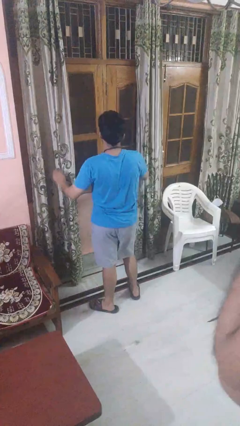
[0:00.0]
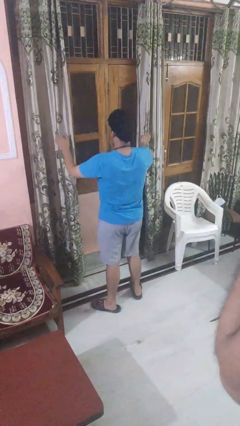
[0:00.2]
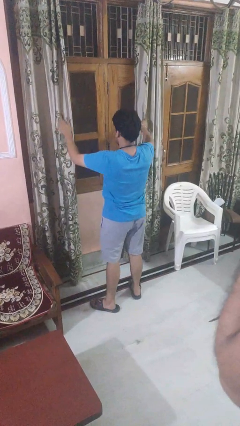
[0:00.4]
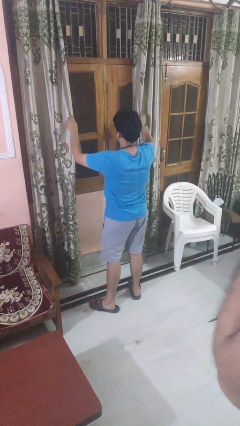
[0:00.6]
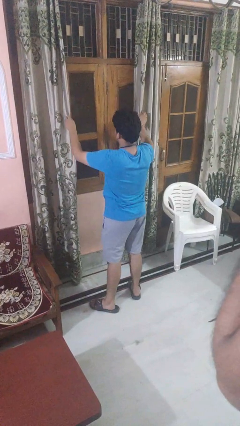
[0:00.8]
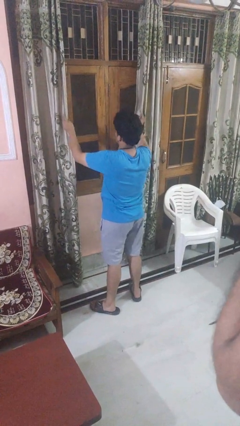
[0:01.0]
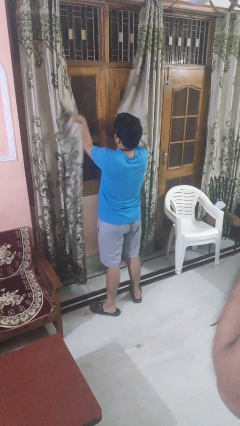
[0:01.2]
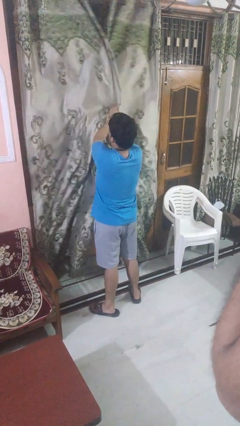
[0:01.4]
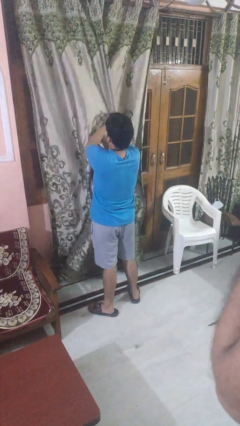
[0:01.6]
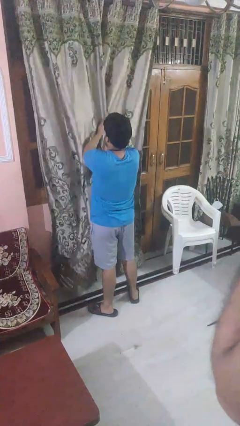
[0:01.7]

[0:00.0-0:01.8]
person closes curtains

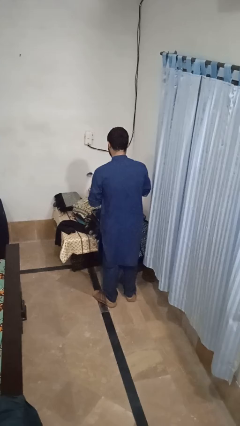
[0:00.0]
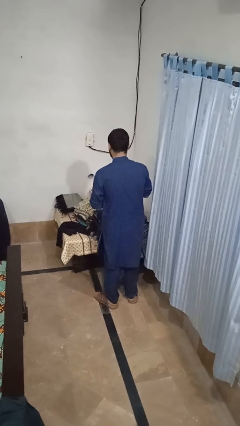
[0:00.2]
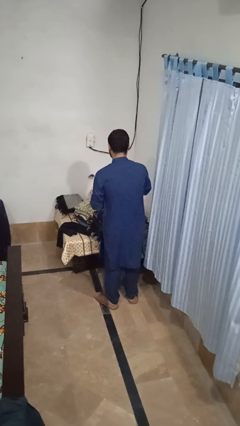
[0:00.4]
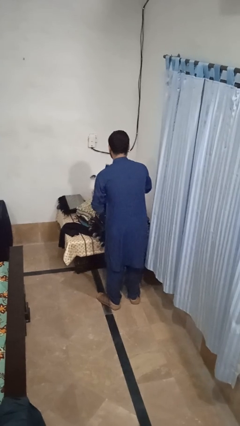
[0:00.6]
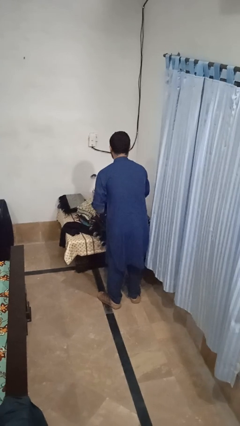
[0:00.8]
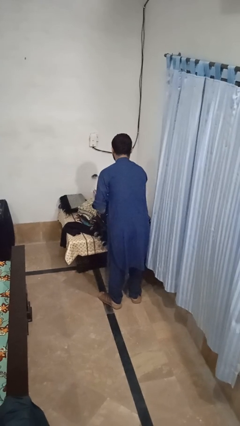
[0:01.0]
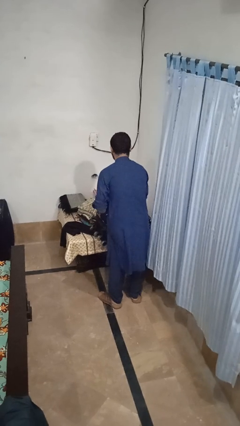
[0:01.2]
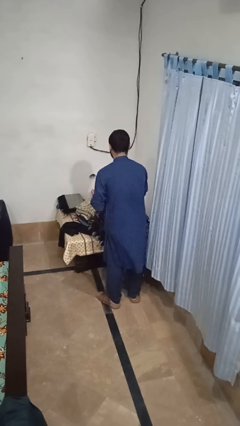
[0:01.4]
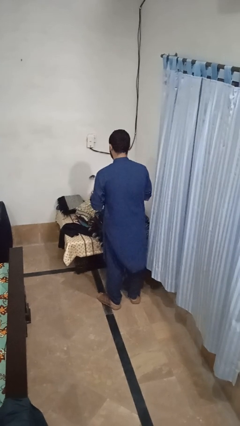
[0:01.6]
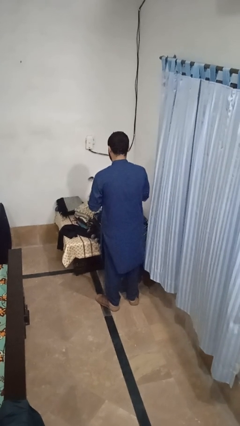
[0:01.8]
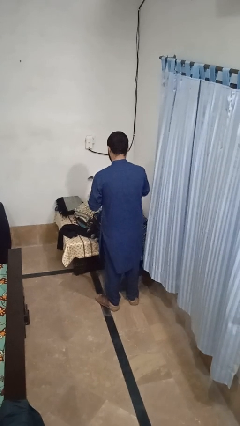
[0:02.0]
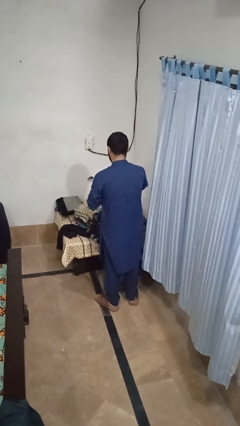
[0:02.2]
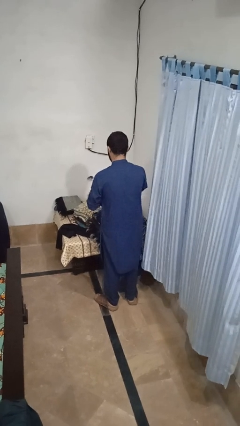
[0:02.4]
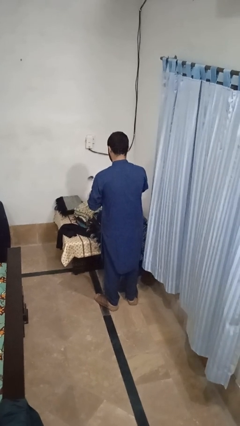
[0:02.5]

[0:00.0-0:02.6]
person loads clothes into suitcase

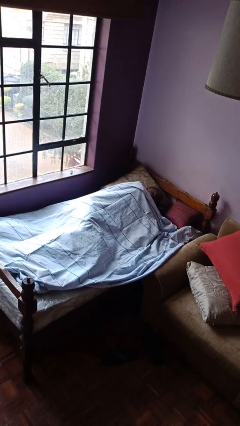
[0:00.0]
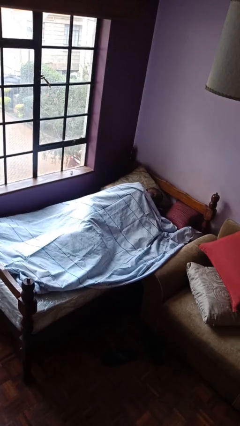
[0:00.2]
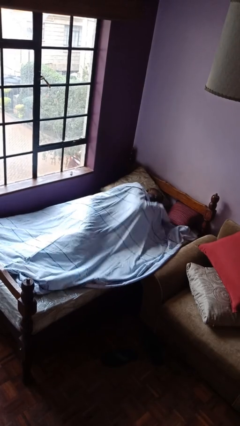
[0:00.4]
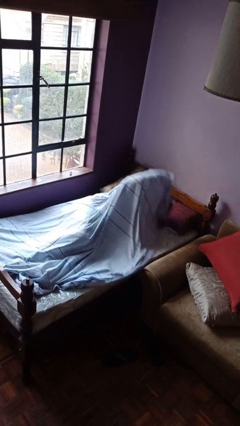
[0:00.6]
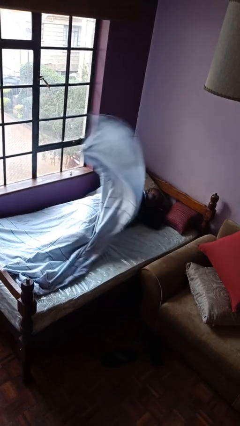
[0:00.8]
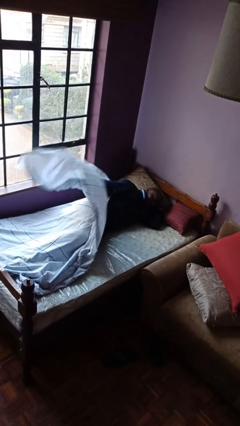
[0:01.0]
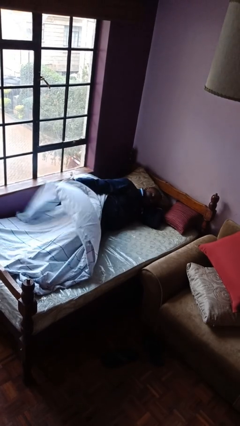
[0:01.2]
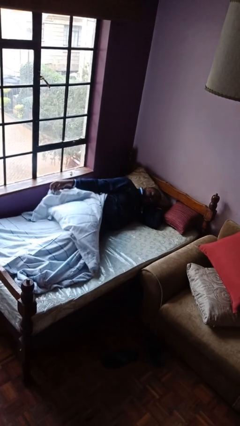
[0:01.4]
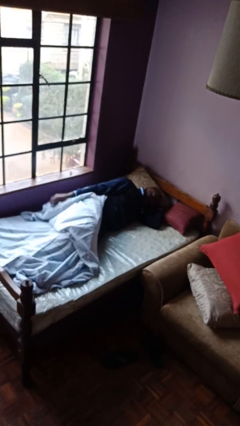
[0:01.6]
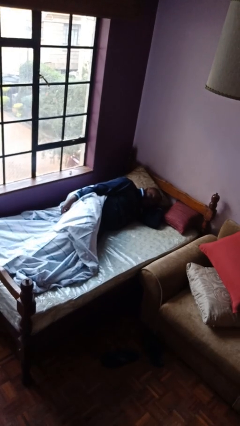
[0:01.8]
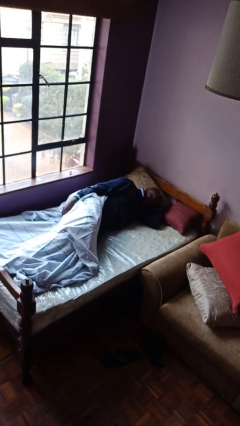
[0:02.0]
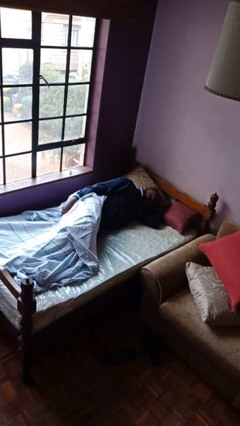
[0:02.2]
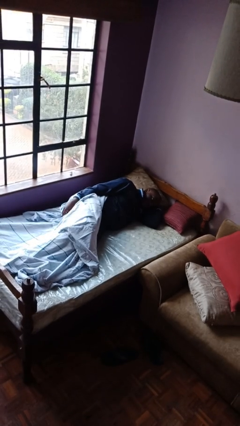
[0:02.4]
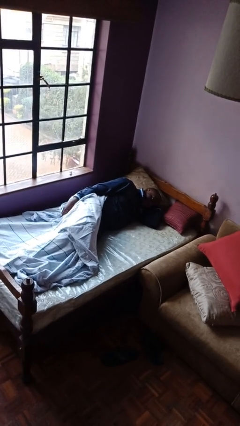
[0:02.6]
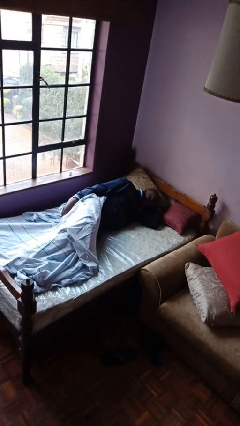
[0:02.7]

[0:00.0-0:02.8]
person uncovers with bedsheets

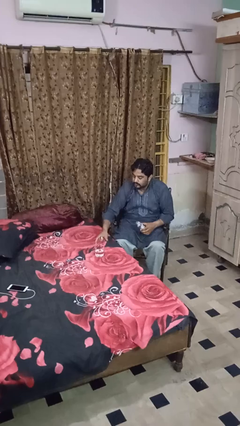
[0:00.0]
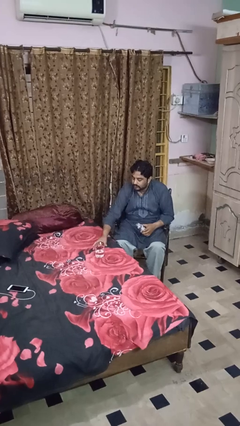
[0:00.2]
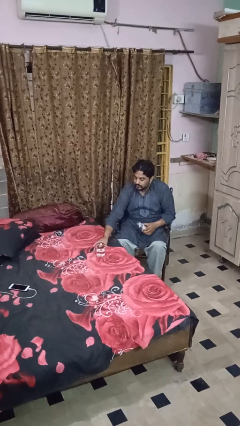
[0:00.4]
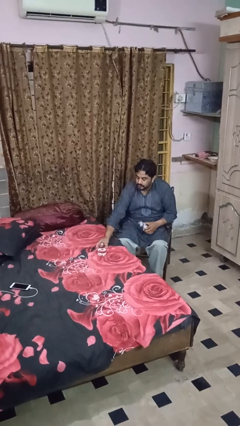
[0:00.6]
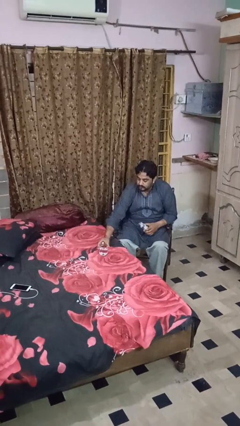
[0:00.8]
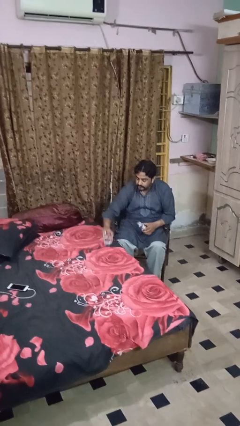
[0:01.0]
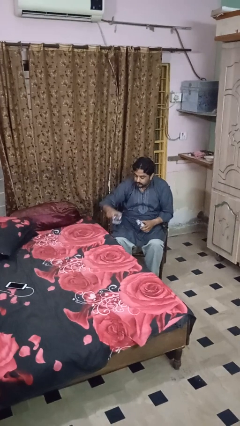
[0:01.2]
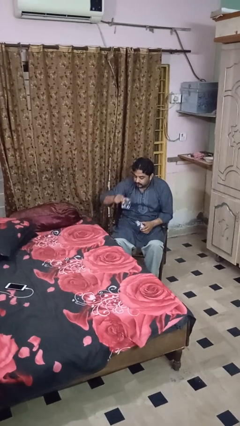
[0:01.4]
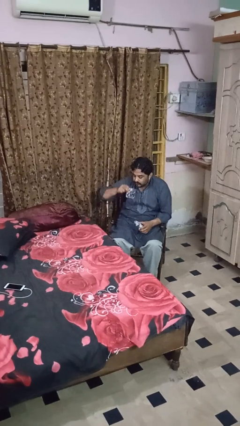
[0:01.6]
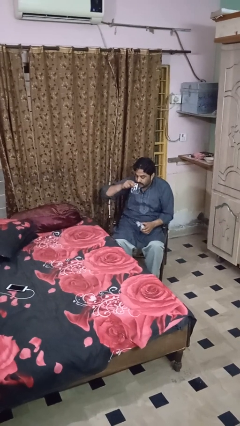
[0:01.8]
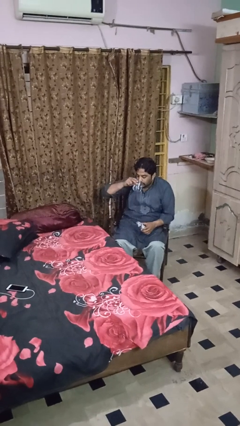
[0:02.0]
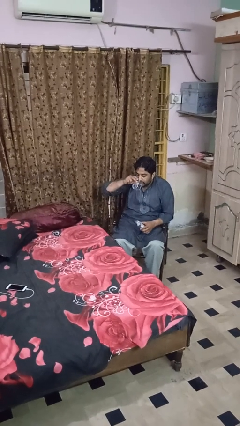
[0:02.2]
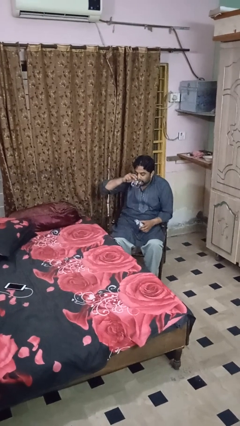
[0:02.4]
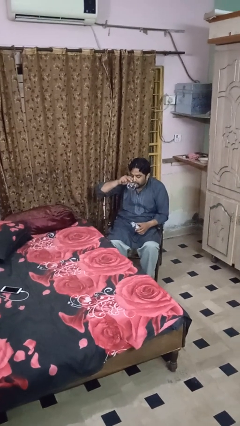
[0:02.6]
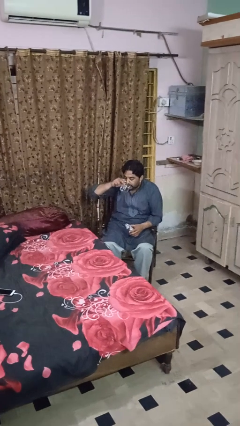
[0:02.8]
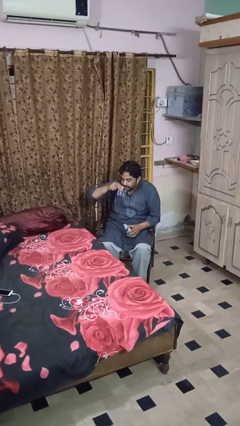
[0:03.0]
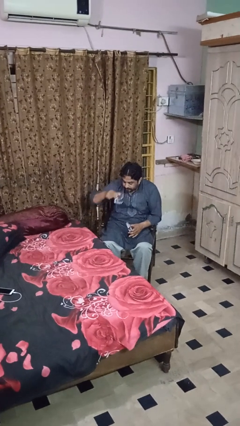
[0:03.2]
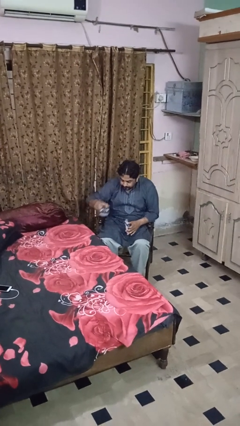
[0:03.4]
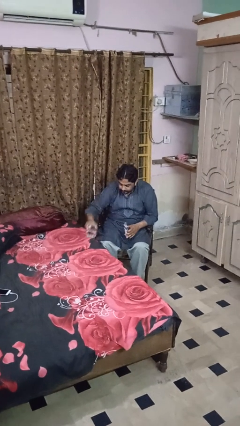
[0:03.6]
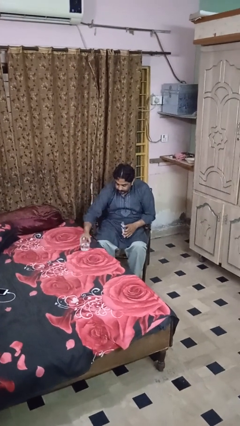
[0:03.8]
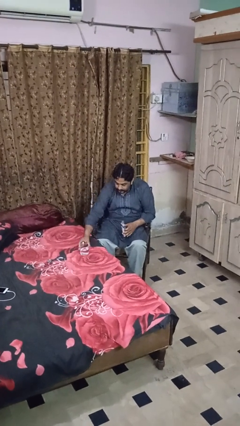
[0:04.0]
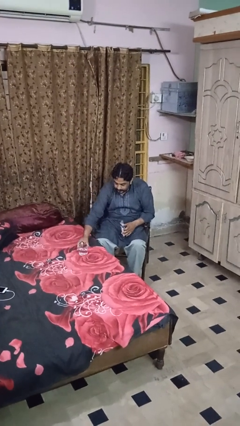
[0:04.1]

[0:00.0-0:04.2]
person drinks from cup

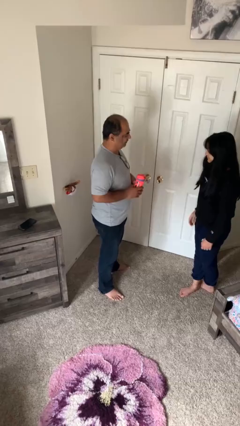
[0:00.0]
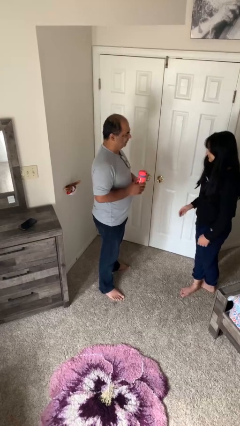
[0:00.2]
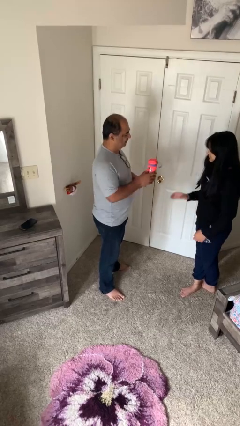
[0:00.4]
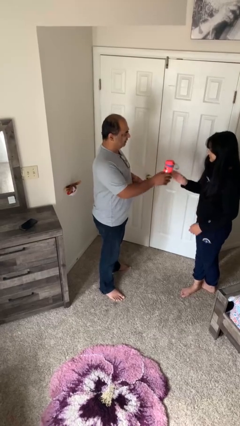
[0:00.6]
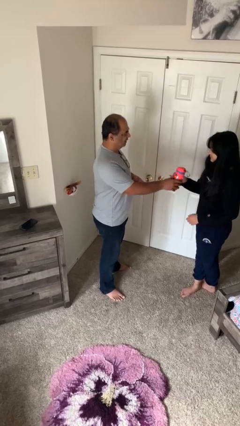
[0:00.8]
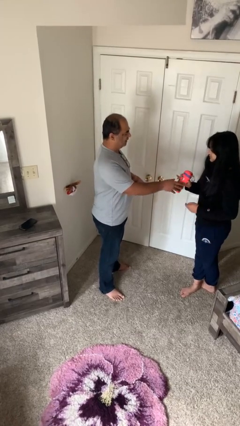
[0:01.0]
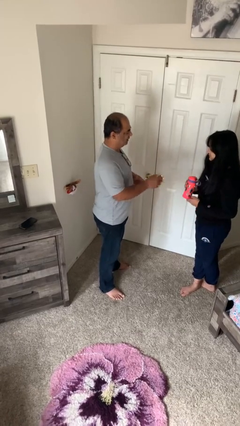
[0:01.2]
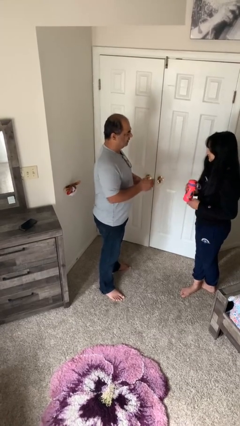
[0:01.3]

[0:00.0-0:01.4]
person transfers object to person

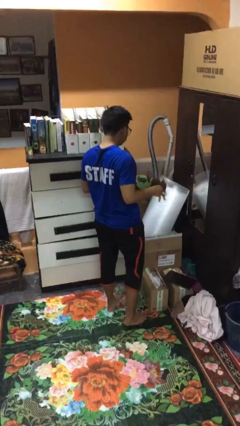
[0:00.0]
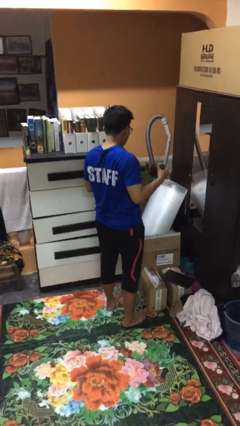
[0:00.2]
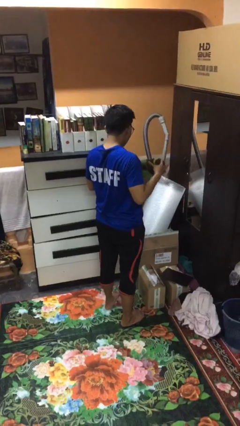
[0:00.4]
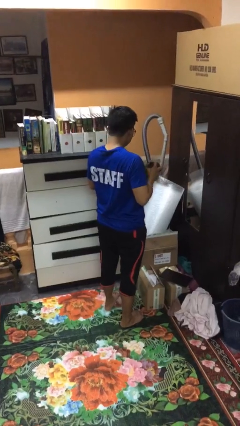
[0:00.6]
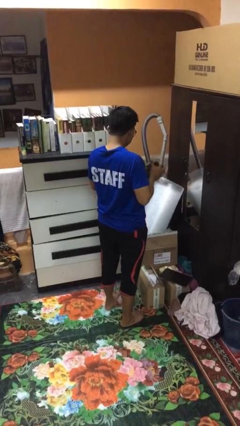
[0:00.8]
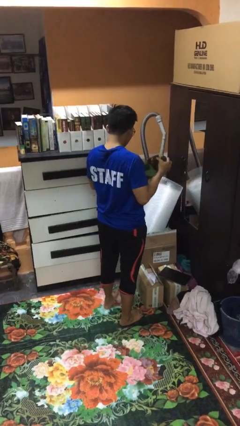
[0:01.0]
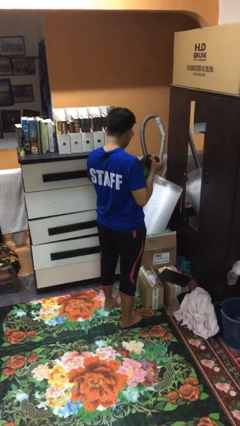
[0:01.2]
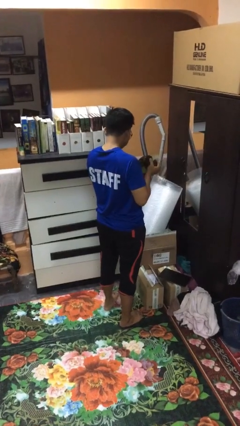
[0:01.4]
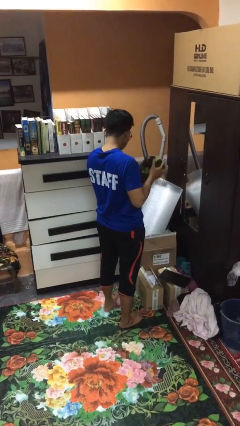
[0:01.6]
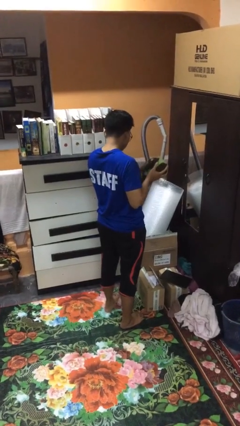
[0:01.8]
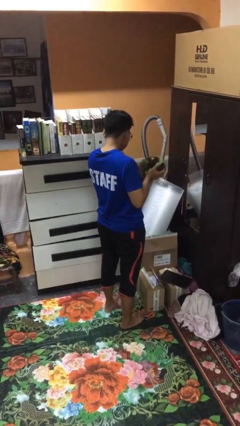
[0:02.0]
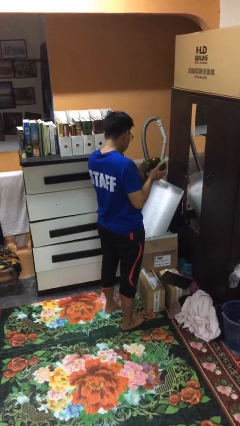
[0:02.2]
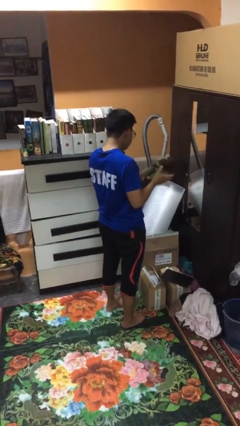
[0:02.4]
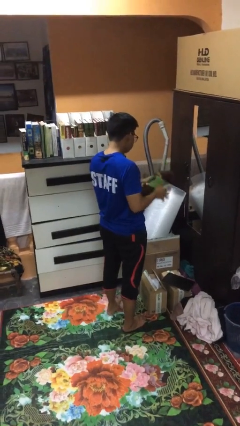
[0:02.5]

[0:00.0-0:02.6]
person squeezes object

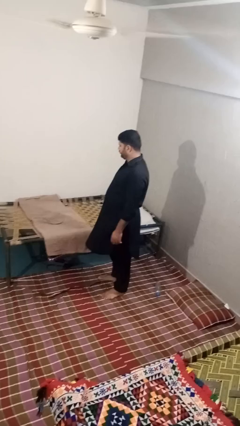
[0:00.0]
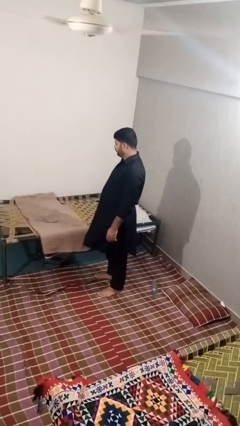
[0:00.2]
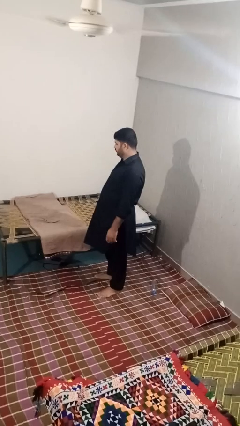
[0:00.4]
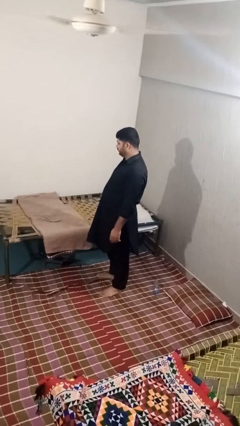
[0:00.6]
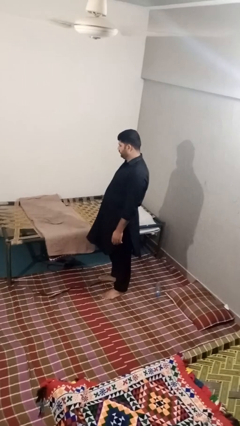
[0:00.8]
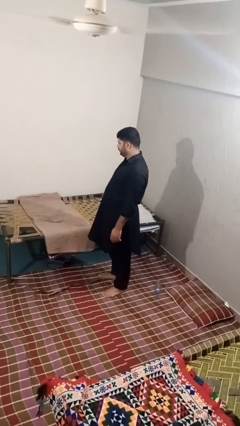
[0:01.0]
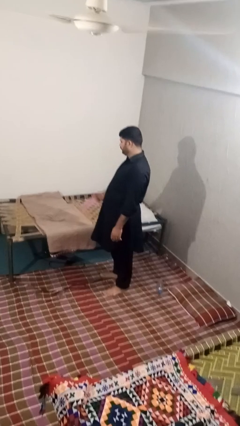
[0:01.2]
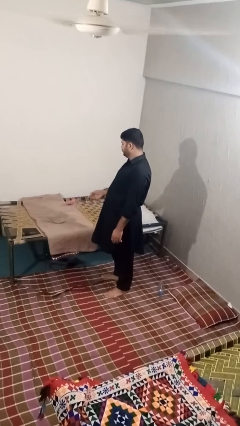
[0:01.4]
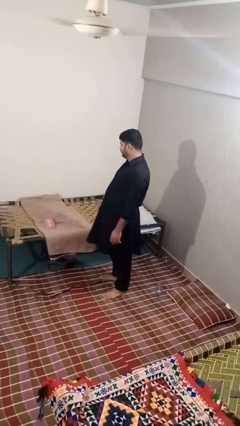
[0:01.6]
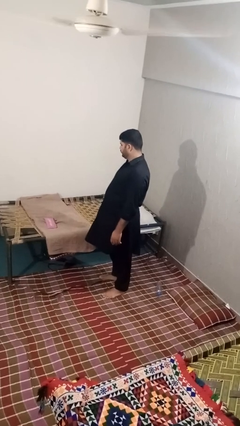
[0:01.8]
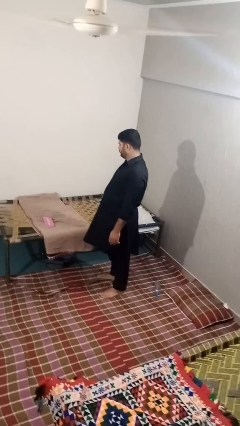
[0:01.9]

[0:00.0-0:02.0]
person puts down object on bed
